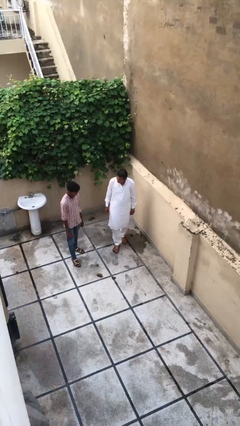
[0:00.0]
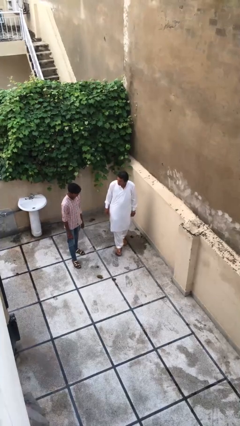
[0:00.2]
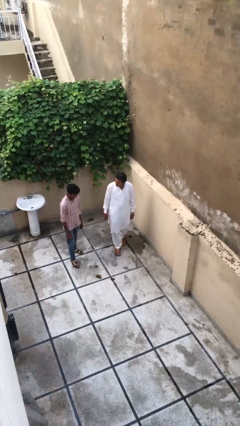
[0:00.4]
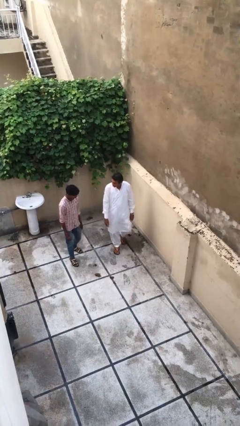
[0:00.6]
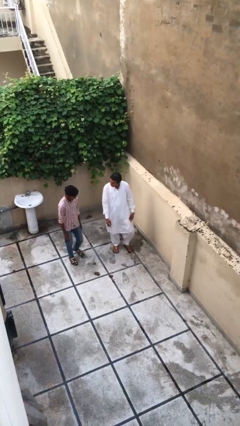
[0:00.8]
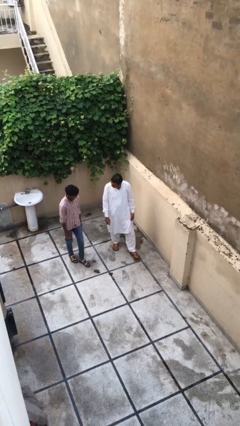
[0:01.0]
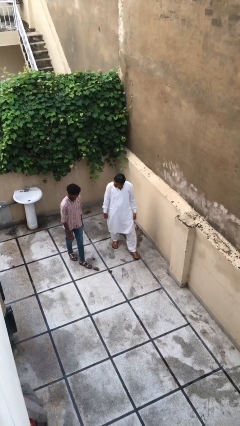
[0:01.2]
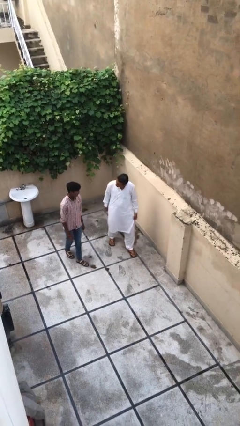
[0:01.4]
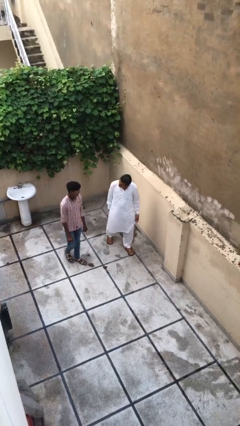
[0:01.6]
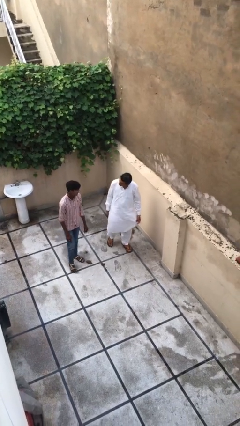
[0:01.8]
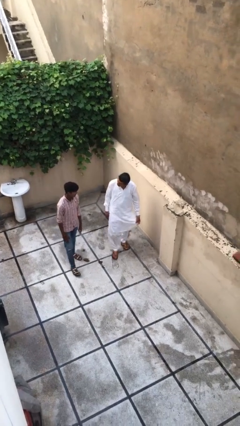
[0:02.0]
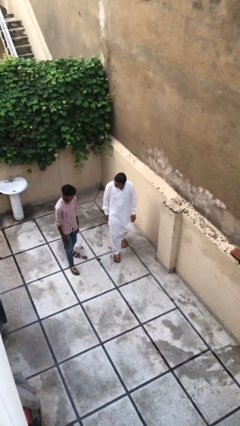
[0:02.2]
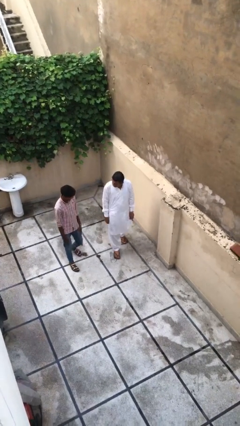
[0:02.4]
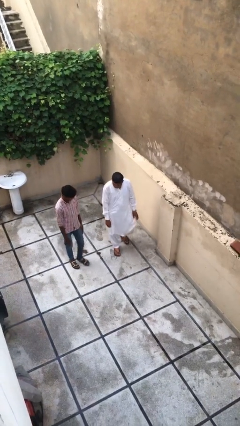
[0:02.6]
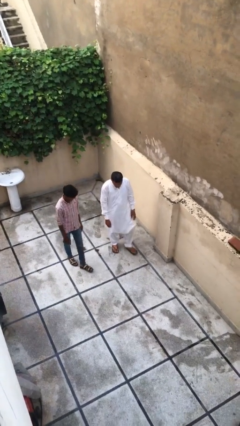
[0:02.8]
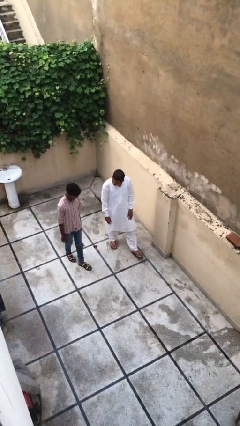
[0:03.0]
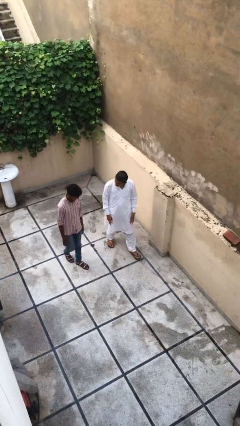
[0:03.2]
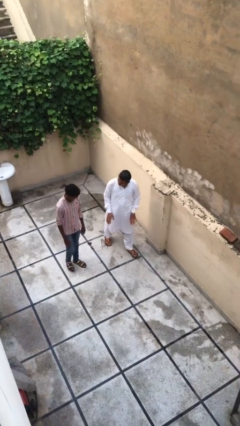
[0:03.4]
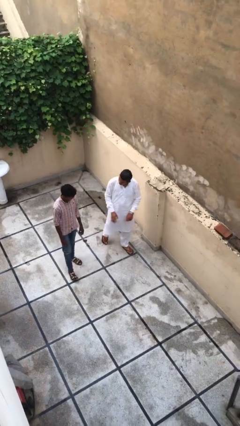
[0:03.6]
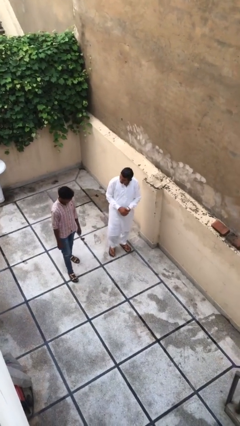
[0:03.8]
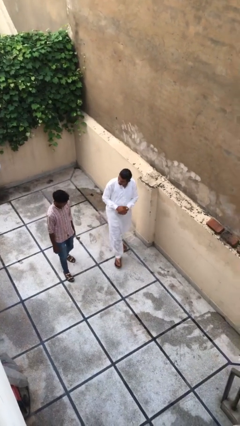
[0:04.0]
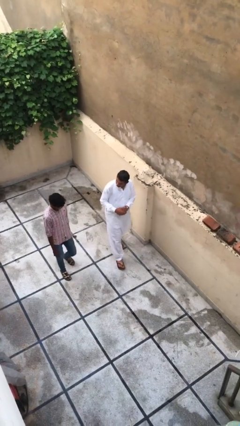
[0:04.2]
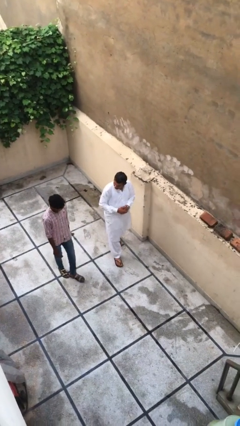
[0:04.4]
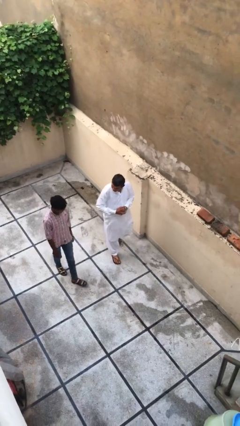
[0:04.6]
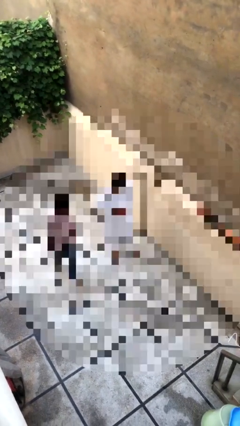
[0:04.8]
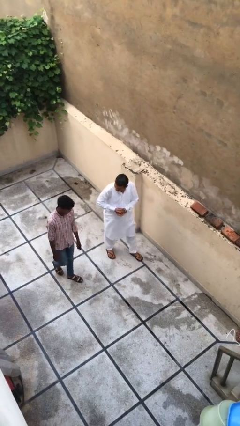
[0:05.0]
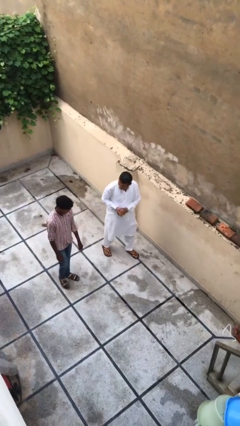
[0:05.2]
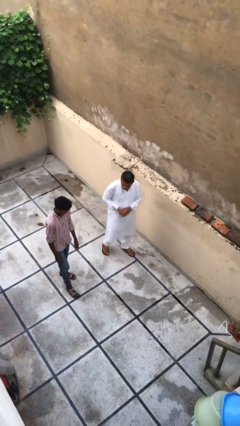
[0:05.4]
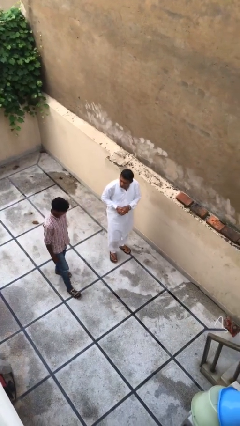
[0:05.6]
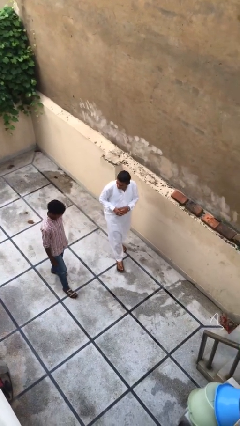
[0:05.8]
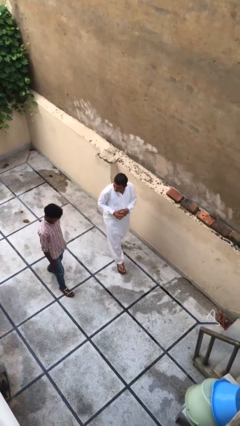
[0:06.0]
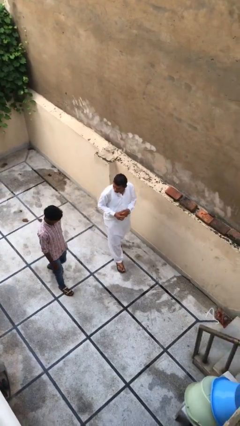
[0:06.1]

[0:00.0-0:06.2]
person talks to person

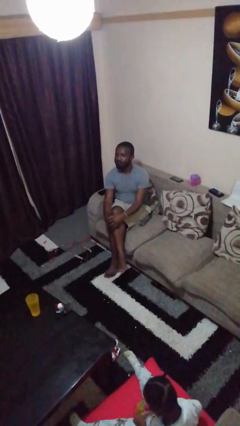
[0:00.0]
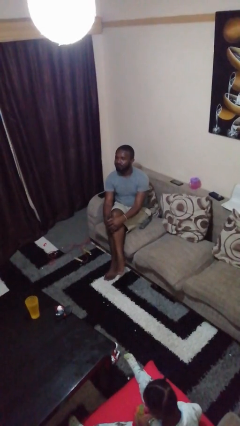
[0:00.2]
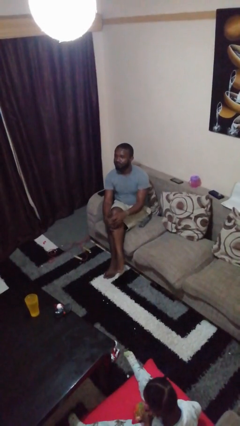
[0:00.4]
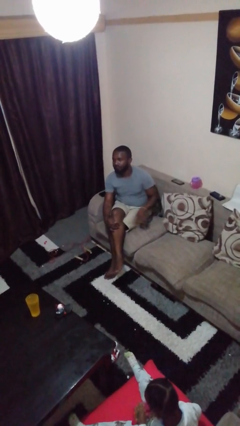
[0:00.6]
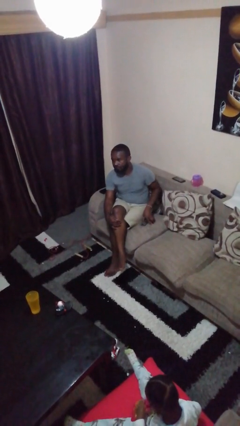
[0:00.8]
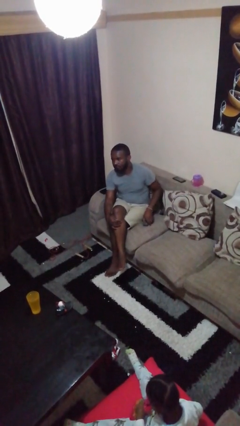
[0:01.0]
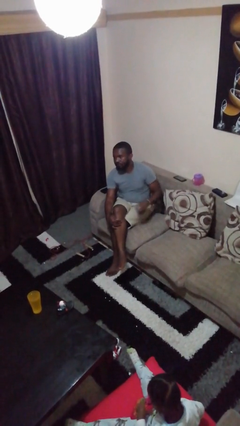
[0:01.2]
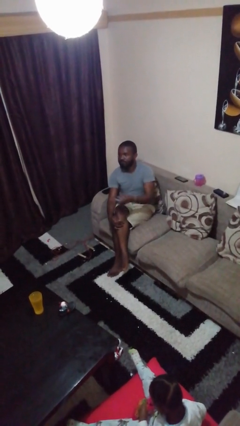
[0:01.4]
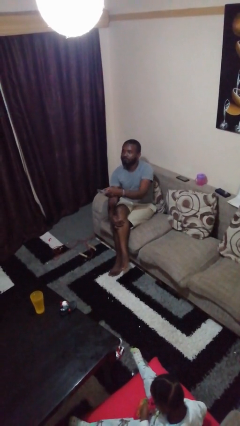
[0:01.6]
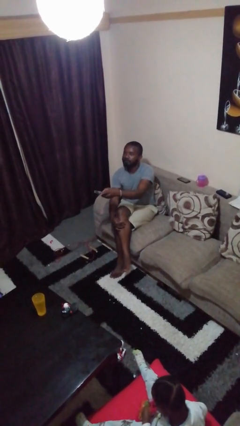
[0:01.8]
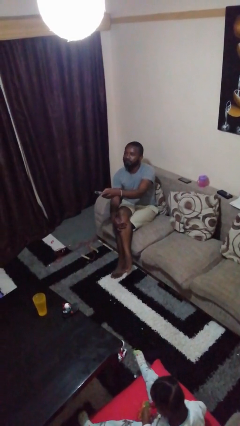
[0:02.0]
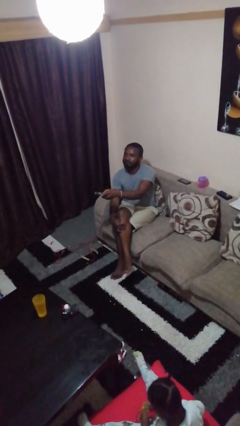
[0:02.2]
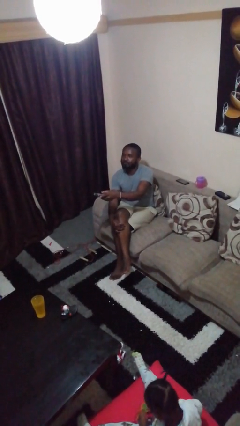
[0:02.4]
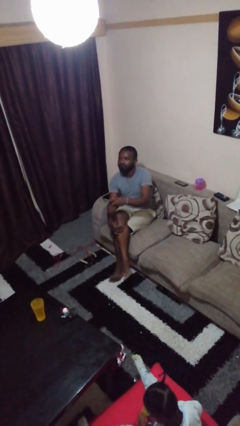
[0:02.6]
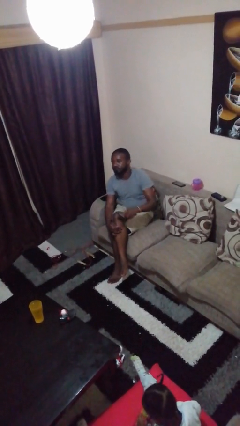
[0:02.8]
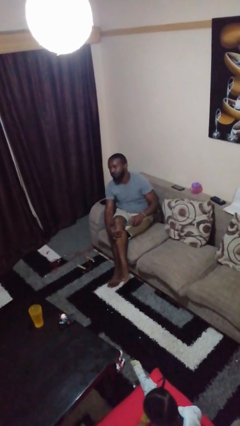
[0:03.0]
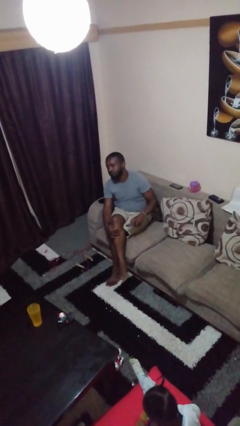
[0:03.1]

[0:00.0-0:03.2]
person uses television remote

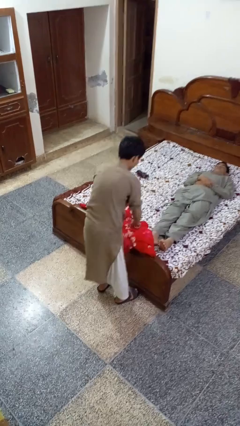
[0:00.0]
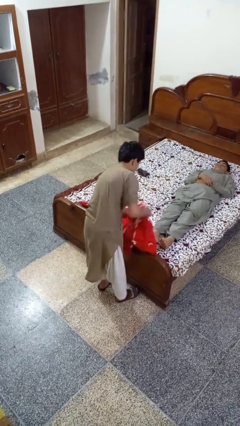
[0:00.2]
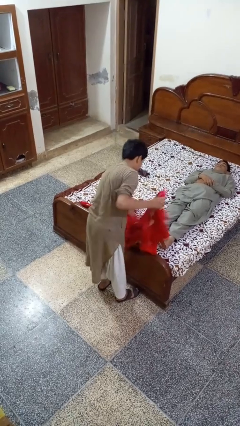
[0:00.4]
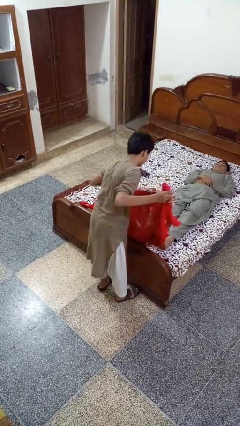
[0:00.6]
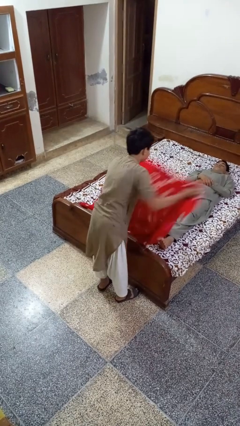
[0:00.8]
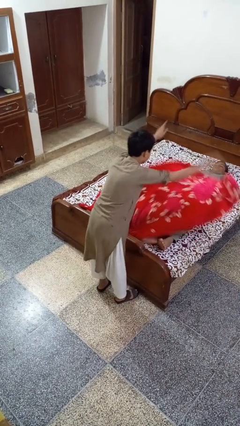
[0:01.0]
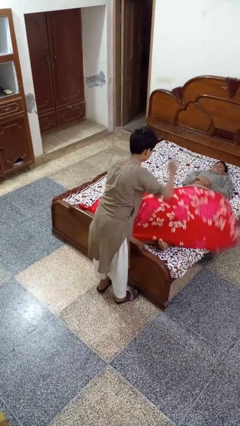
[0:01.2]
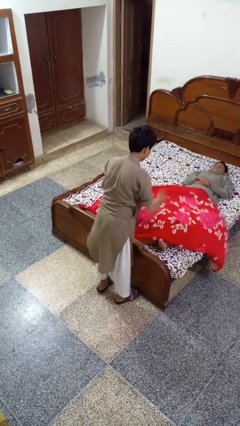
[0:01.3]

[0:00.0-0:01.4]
person covers friend with blanket

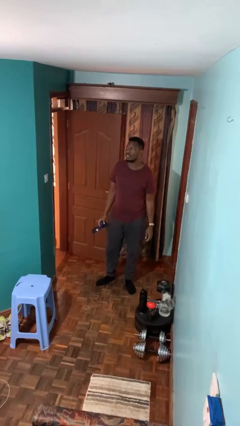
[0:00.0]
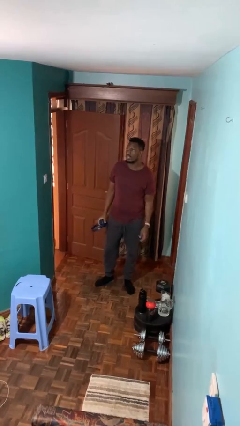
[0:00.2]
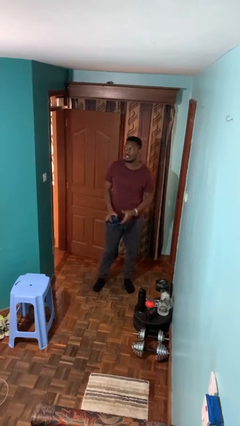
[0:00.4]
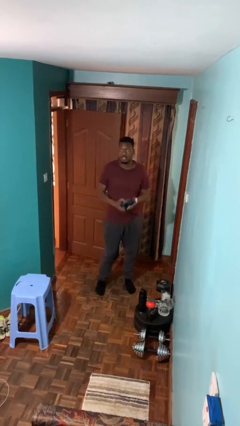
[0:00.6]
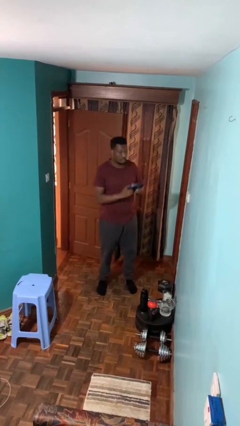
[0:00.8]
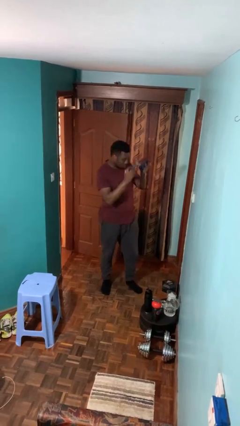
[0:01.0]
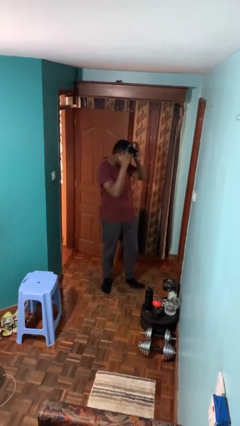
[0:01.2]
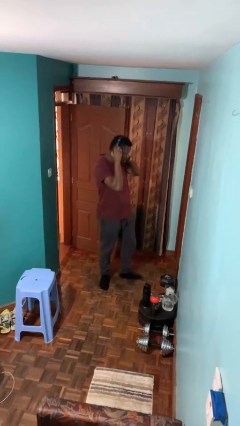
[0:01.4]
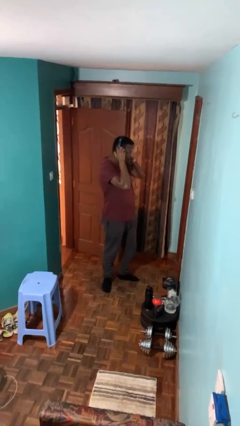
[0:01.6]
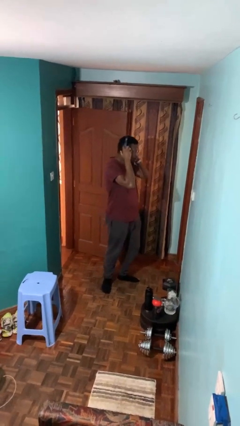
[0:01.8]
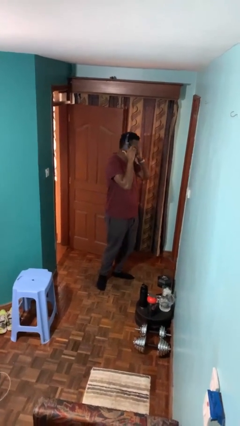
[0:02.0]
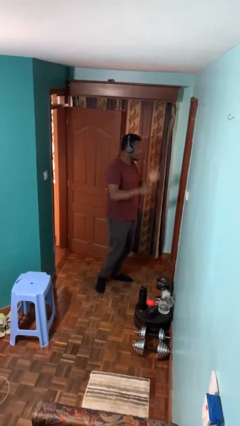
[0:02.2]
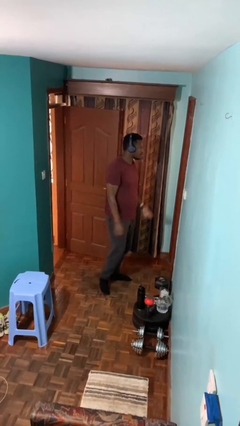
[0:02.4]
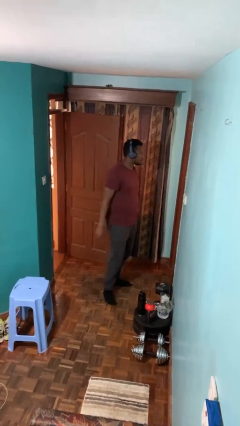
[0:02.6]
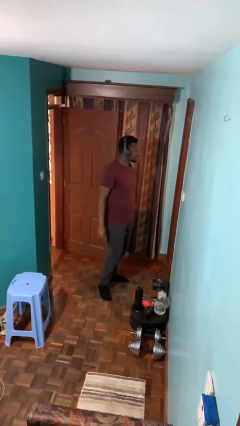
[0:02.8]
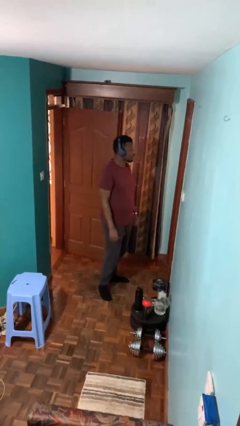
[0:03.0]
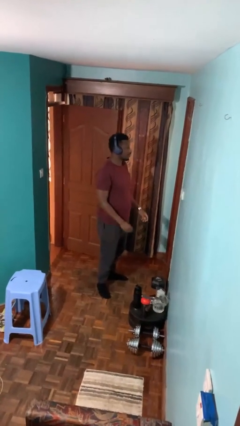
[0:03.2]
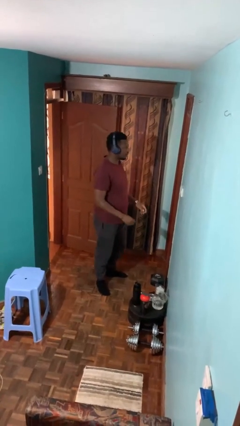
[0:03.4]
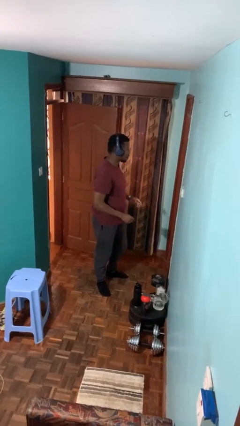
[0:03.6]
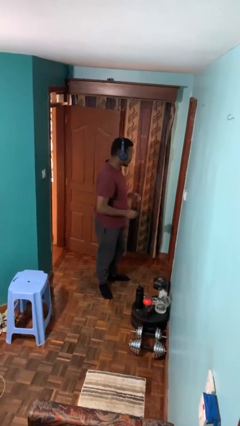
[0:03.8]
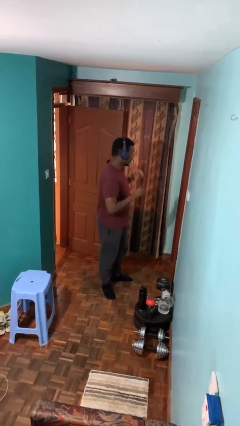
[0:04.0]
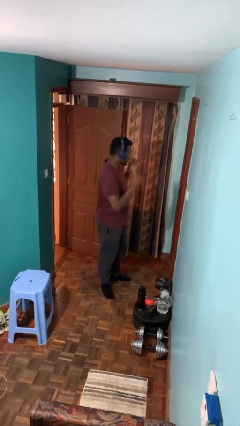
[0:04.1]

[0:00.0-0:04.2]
person puts on headphones

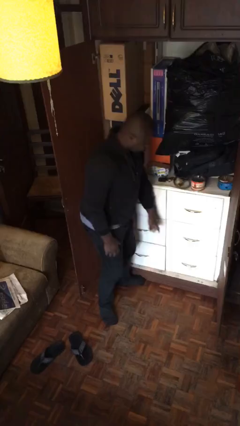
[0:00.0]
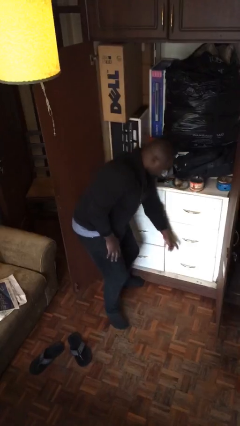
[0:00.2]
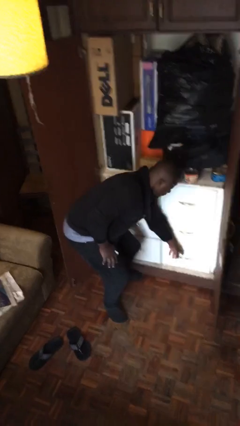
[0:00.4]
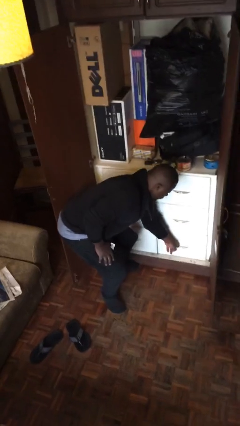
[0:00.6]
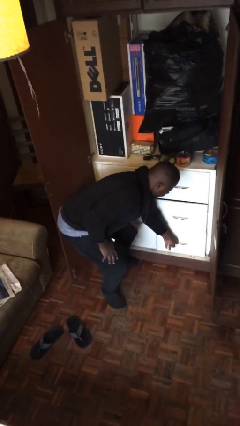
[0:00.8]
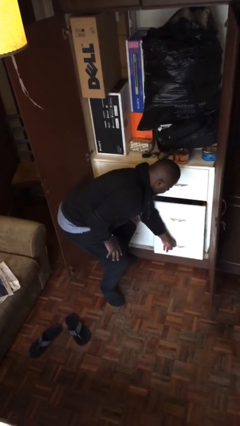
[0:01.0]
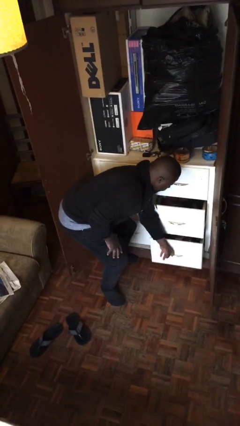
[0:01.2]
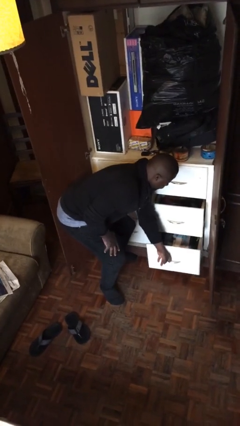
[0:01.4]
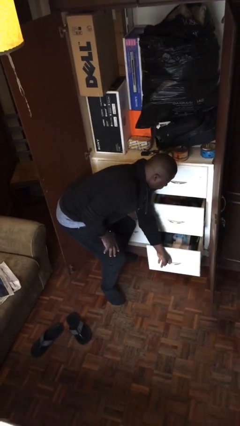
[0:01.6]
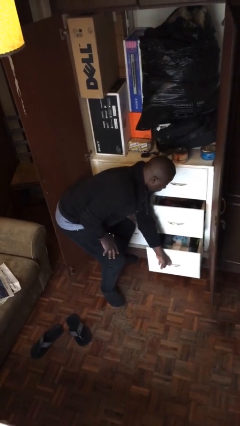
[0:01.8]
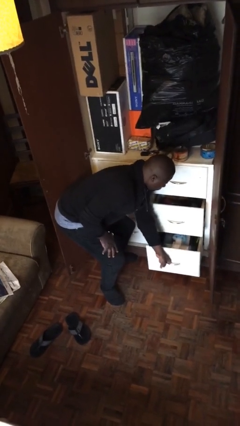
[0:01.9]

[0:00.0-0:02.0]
person opens dresser drawer

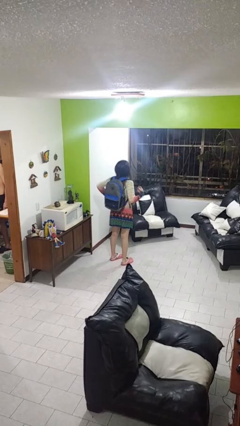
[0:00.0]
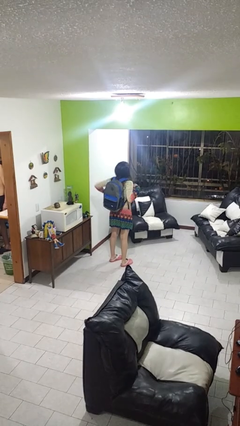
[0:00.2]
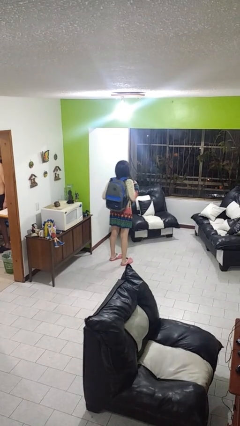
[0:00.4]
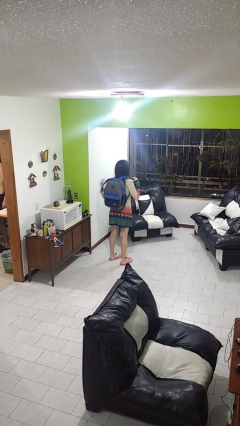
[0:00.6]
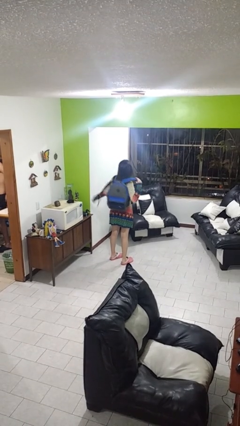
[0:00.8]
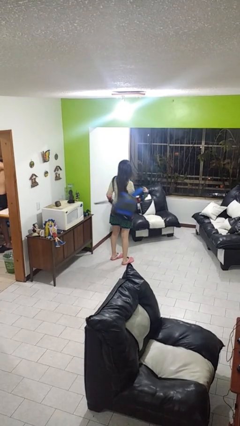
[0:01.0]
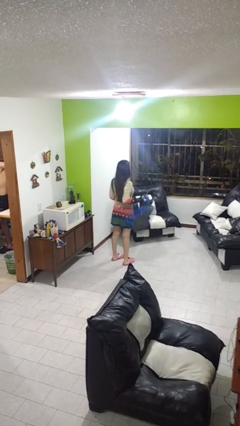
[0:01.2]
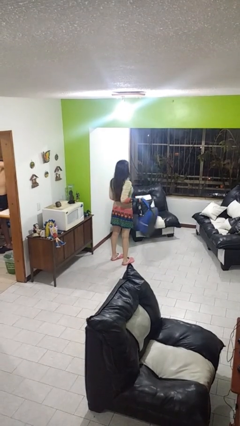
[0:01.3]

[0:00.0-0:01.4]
person takes off backpack
